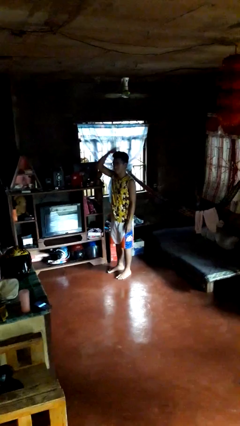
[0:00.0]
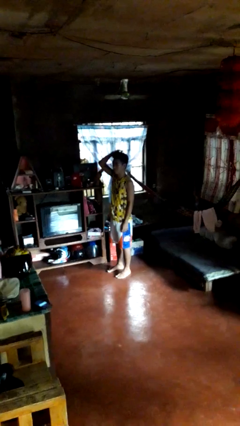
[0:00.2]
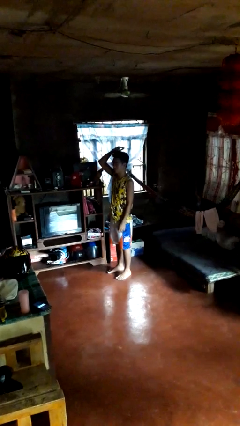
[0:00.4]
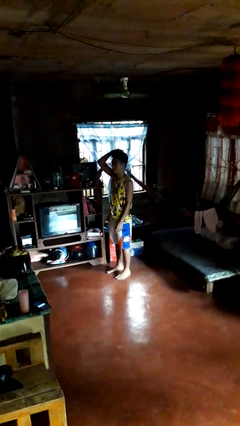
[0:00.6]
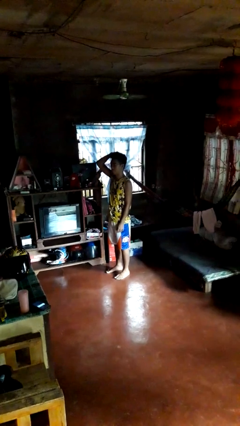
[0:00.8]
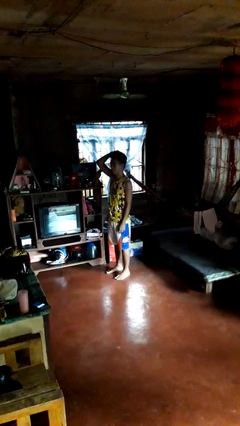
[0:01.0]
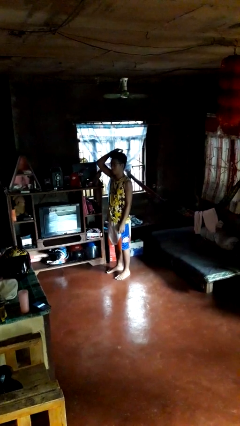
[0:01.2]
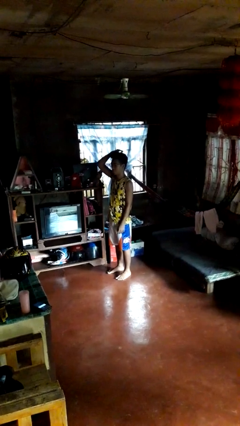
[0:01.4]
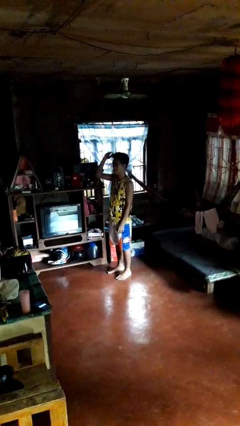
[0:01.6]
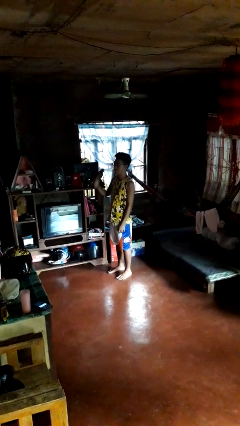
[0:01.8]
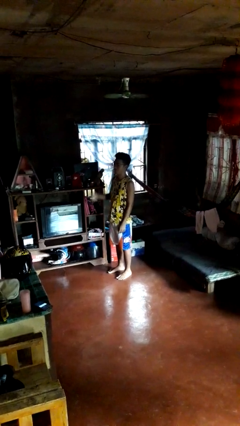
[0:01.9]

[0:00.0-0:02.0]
person pats head

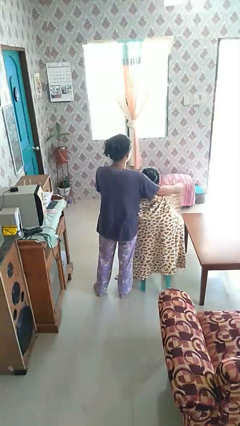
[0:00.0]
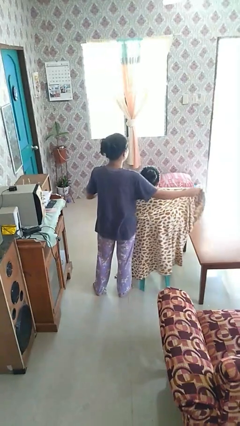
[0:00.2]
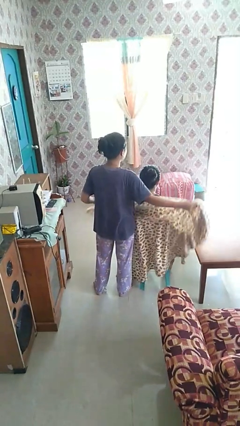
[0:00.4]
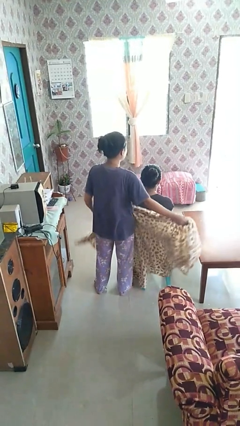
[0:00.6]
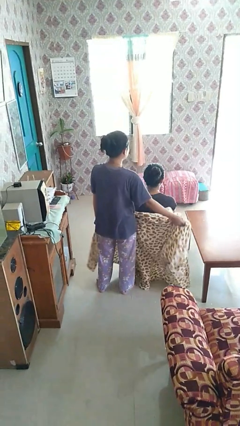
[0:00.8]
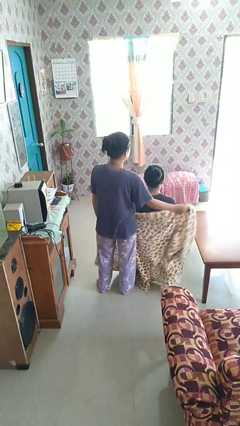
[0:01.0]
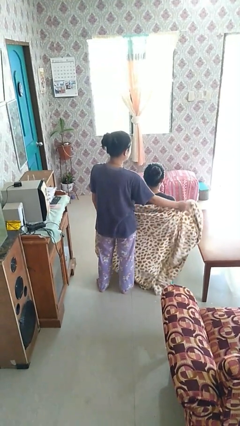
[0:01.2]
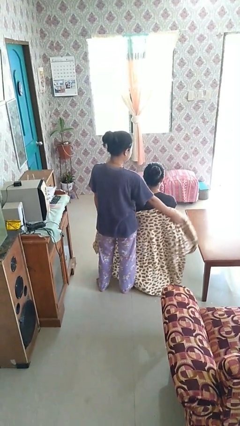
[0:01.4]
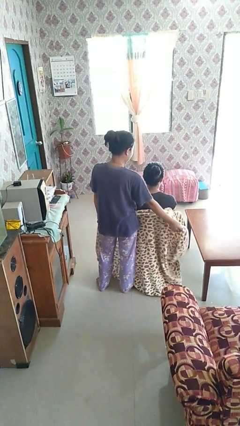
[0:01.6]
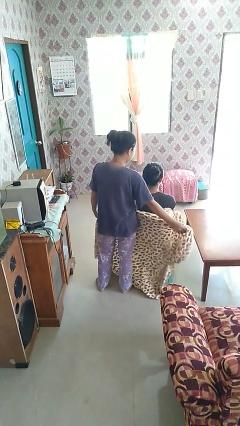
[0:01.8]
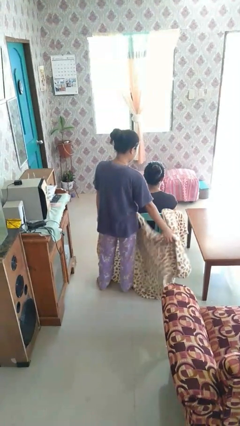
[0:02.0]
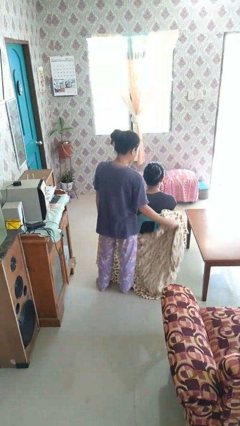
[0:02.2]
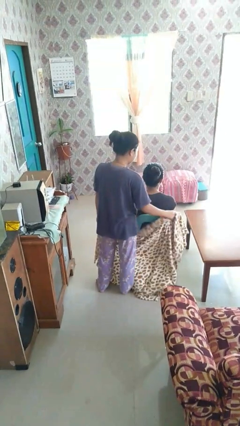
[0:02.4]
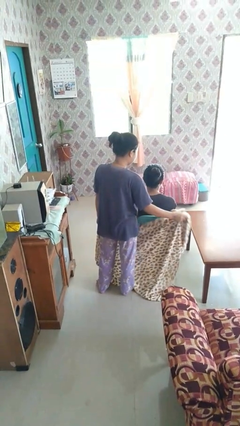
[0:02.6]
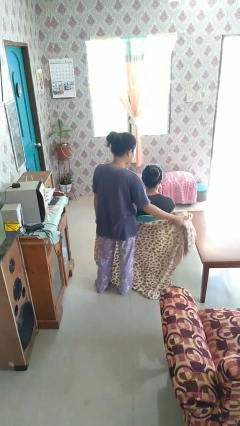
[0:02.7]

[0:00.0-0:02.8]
person uncovers friend with blanket

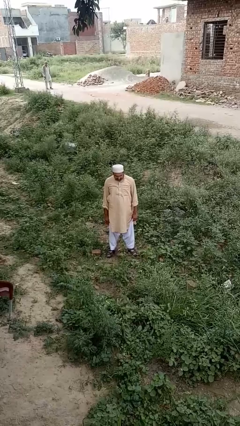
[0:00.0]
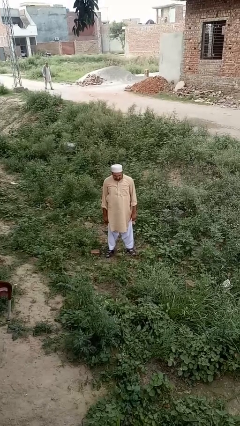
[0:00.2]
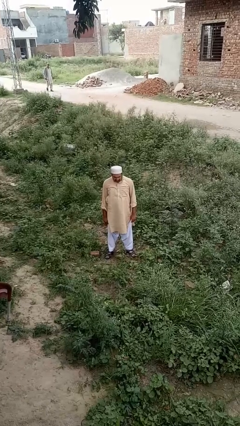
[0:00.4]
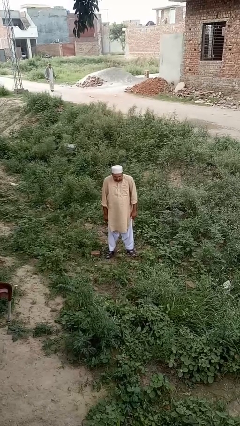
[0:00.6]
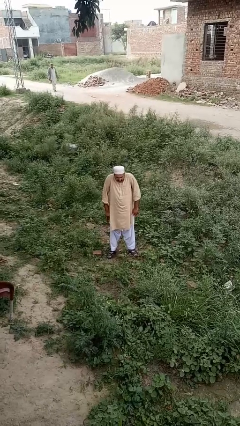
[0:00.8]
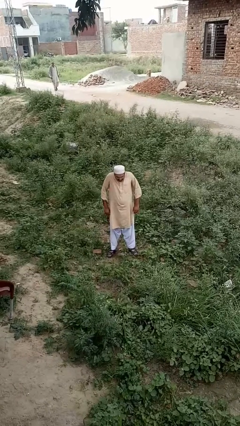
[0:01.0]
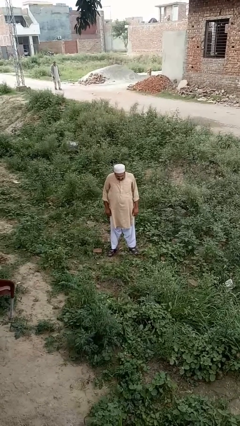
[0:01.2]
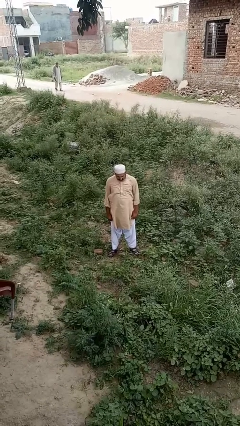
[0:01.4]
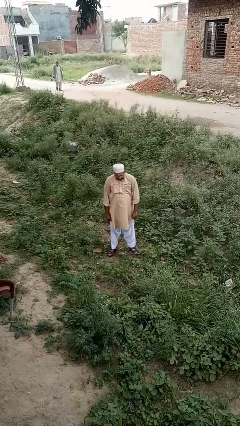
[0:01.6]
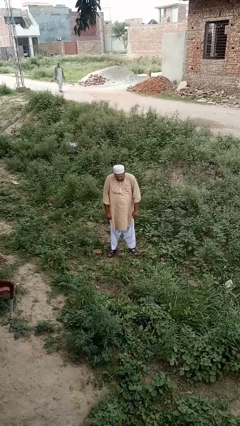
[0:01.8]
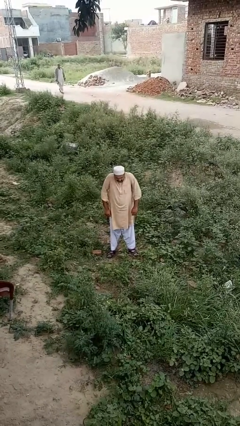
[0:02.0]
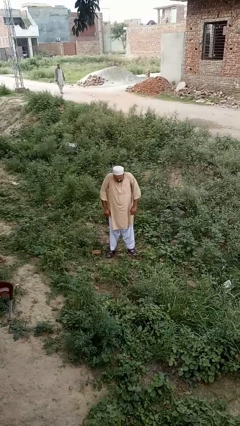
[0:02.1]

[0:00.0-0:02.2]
person shrugs

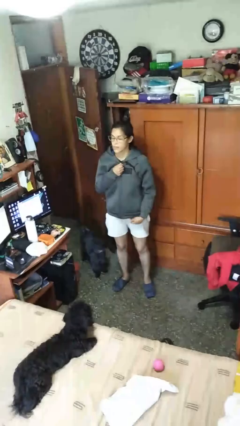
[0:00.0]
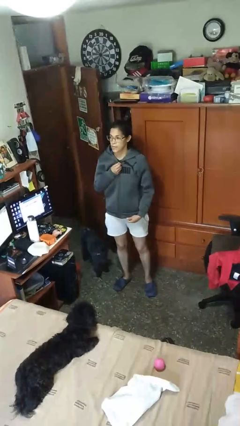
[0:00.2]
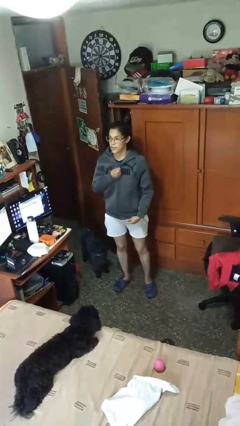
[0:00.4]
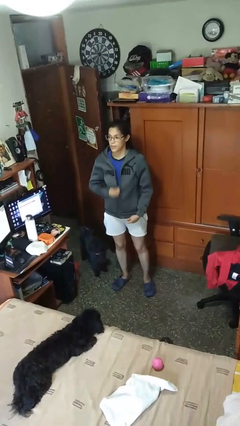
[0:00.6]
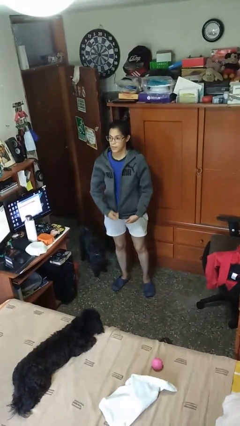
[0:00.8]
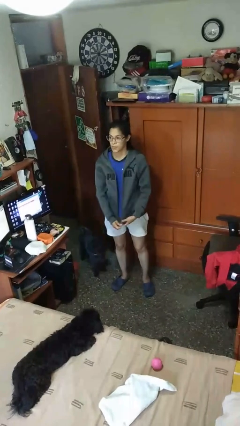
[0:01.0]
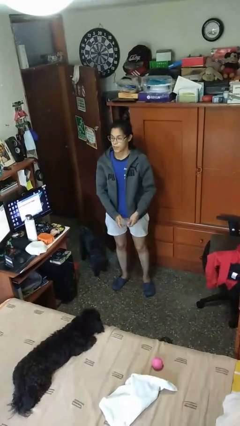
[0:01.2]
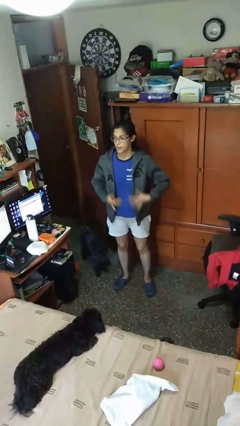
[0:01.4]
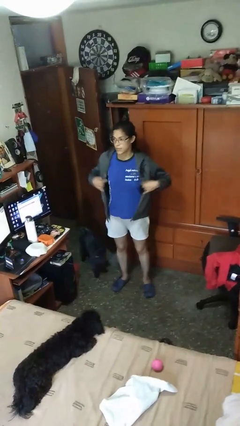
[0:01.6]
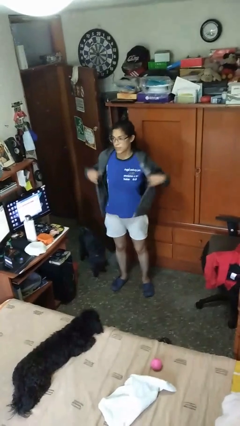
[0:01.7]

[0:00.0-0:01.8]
person unzips jacket

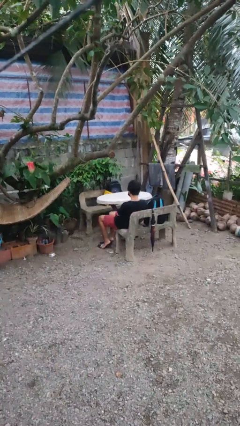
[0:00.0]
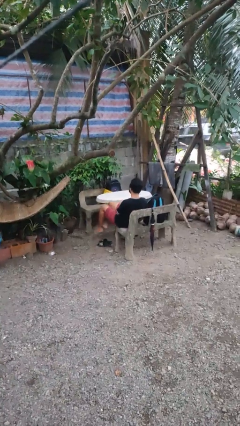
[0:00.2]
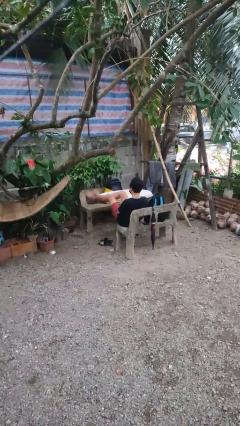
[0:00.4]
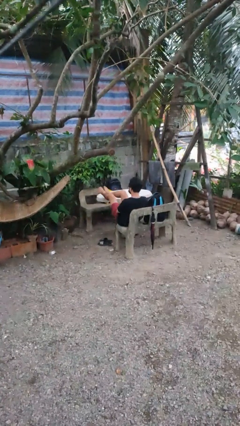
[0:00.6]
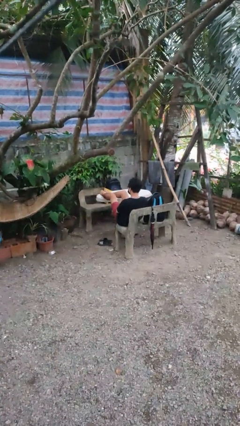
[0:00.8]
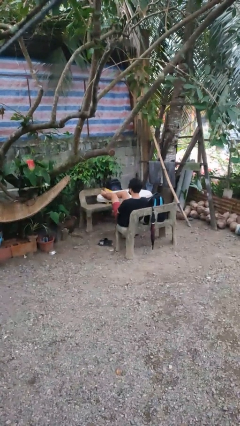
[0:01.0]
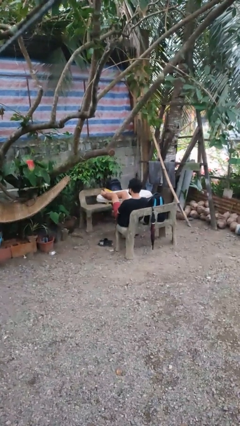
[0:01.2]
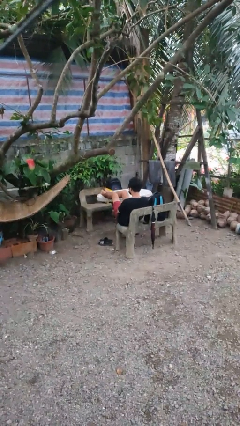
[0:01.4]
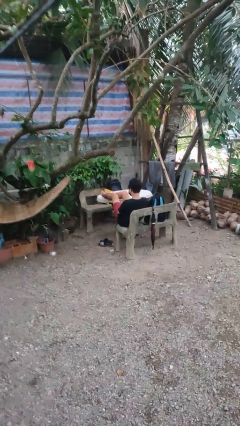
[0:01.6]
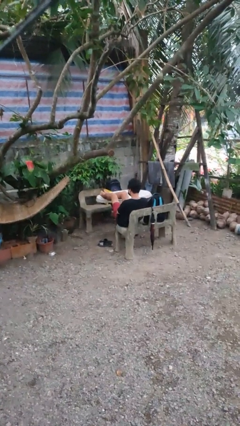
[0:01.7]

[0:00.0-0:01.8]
person puts feet up

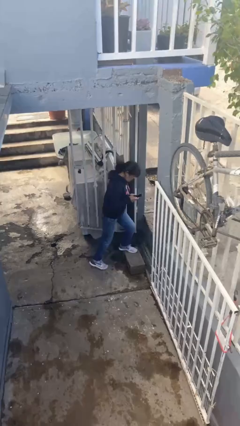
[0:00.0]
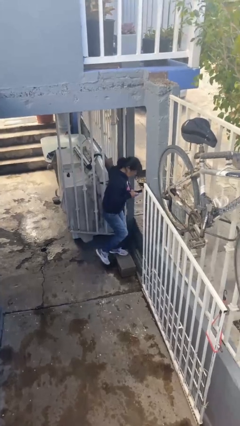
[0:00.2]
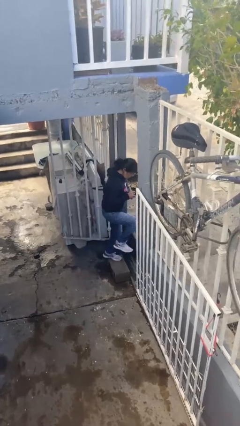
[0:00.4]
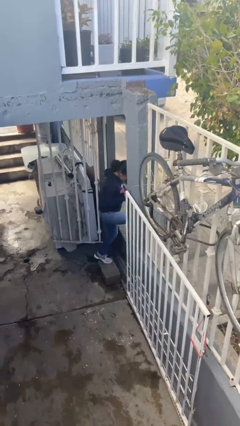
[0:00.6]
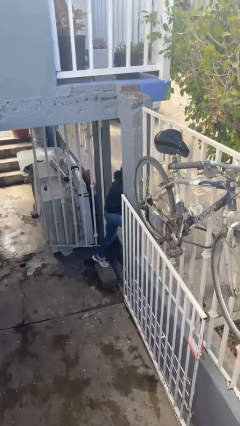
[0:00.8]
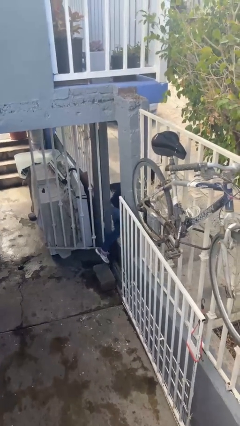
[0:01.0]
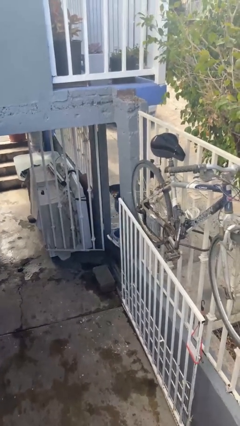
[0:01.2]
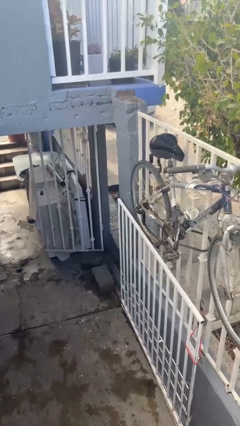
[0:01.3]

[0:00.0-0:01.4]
person exits scene through structure

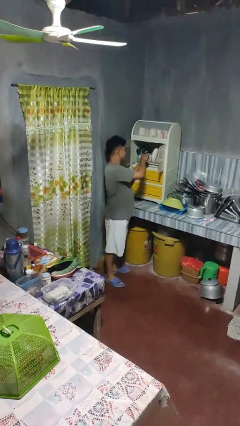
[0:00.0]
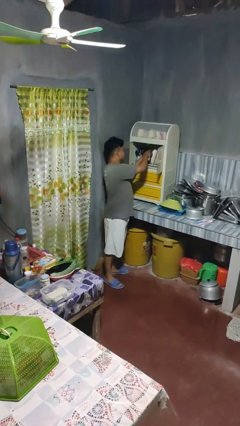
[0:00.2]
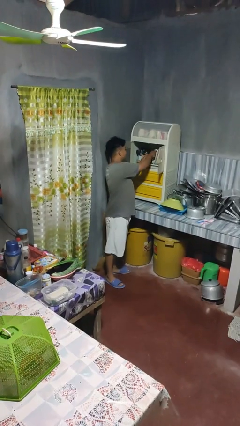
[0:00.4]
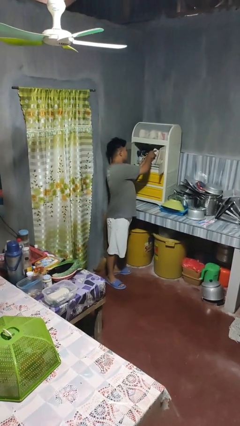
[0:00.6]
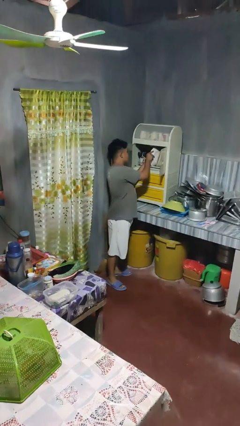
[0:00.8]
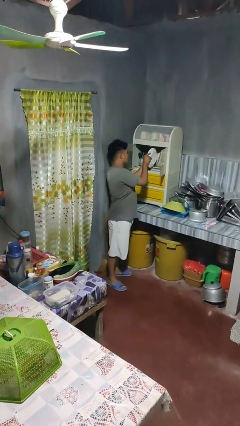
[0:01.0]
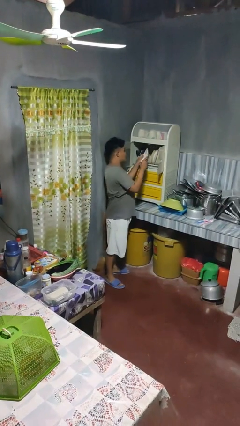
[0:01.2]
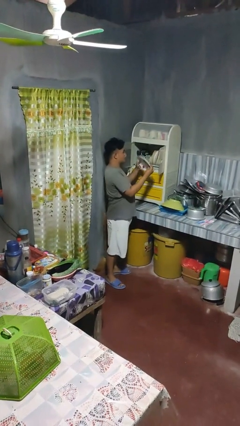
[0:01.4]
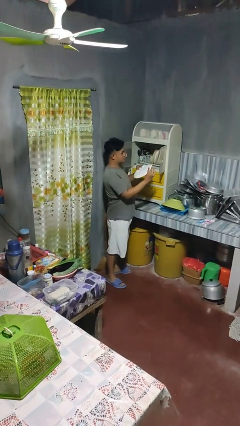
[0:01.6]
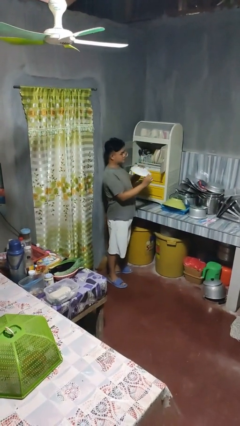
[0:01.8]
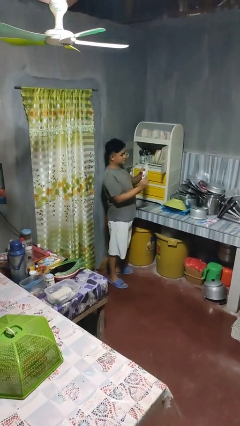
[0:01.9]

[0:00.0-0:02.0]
person takes object from cabinet

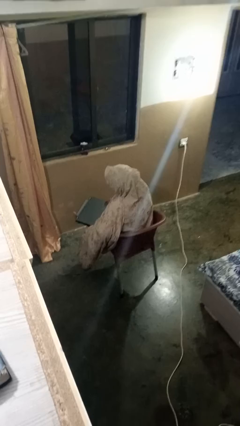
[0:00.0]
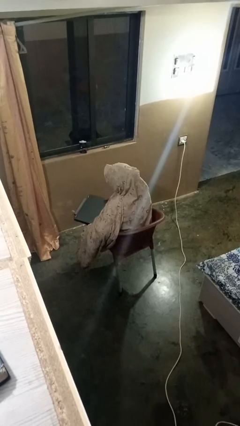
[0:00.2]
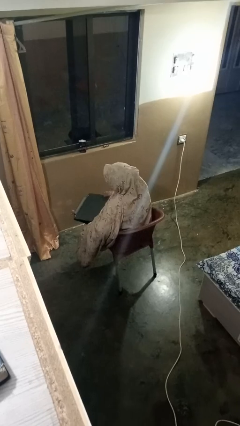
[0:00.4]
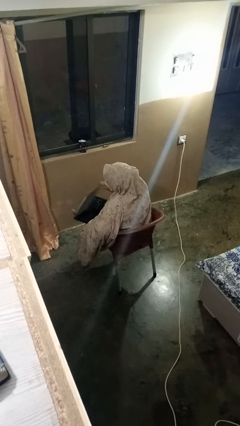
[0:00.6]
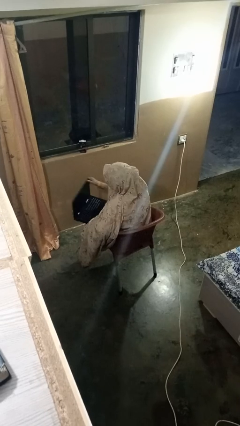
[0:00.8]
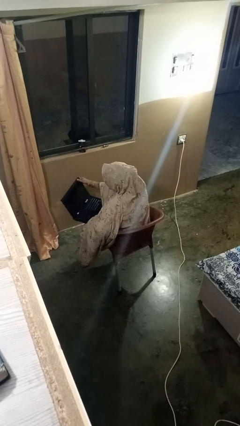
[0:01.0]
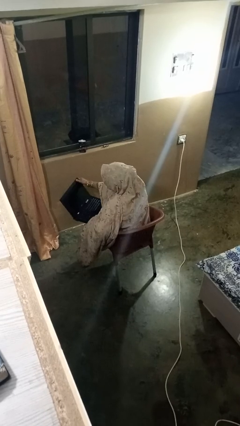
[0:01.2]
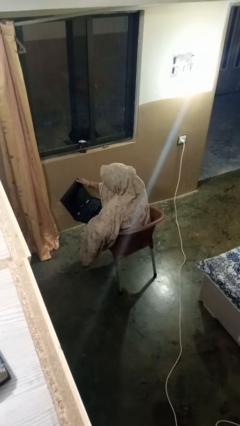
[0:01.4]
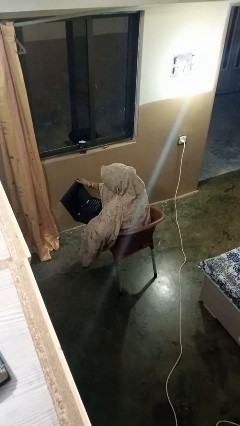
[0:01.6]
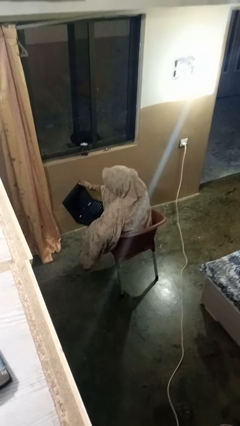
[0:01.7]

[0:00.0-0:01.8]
person opens laptop

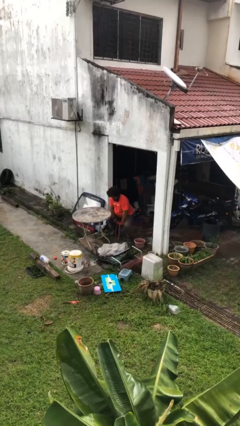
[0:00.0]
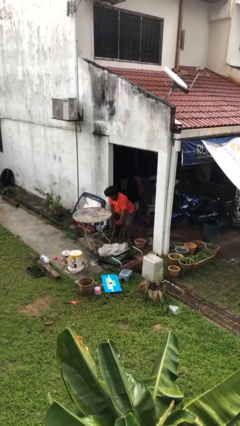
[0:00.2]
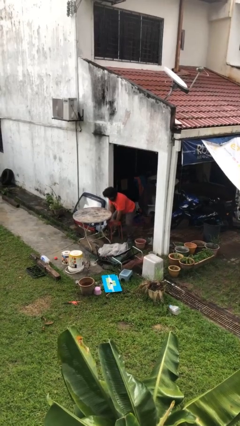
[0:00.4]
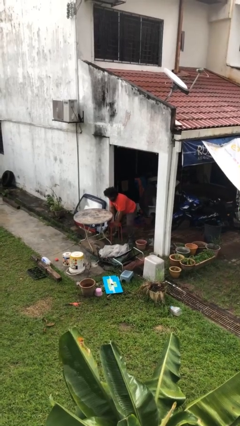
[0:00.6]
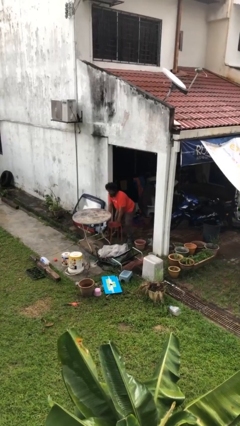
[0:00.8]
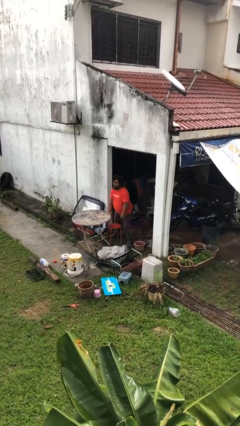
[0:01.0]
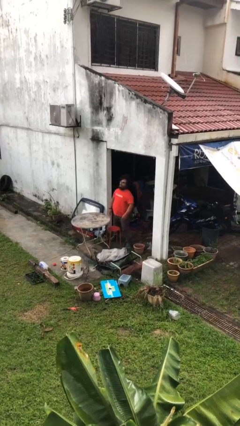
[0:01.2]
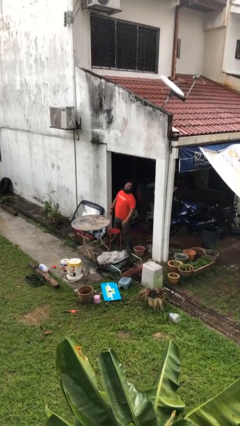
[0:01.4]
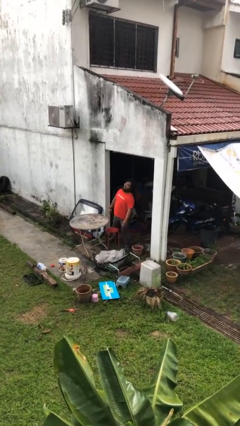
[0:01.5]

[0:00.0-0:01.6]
person stands up
